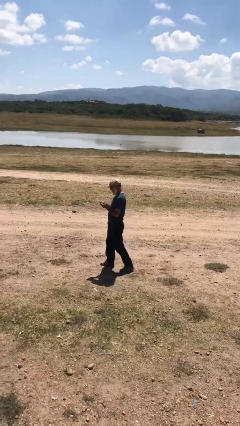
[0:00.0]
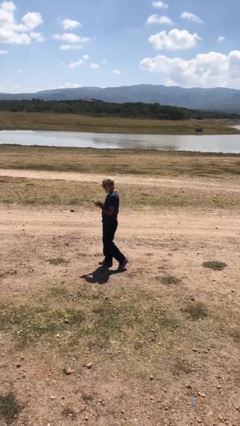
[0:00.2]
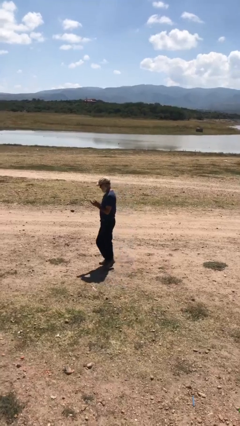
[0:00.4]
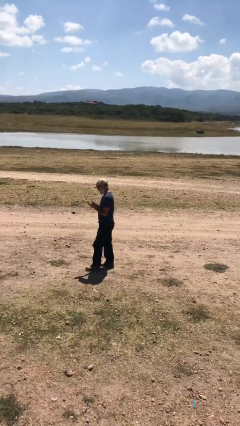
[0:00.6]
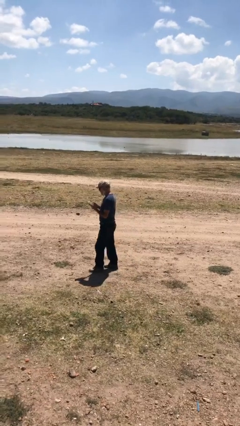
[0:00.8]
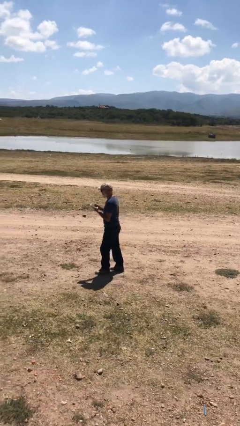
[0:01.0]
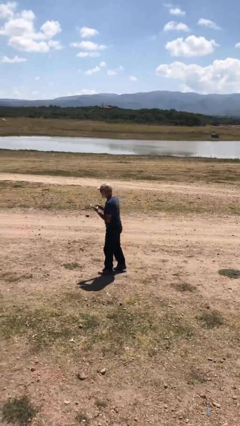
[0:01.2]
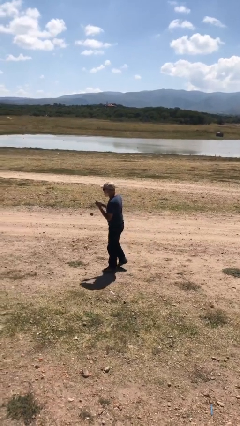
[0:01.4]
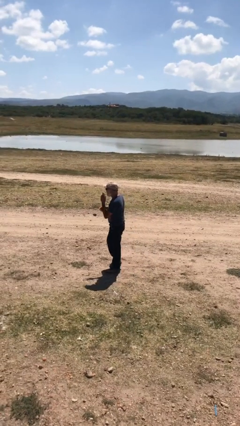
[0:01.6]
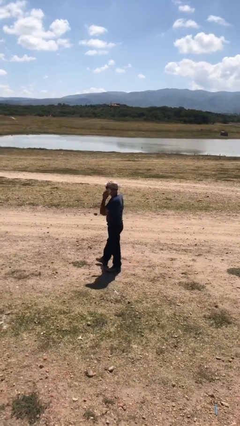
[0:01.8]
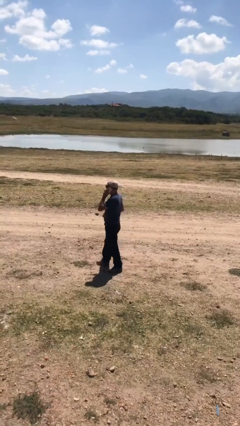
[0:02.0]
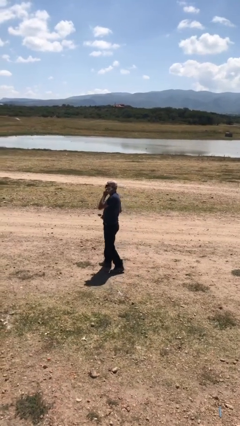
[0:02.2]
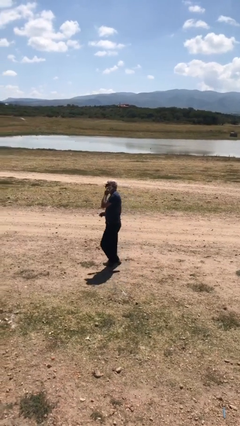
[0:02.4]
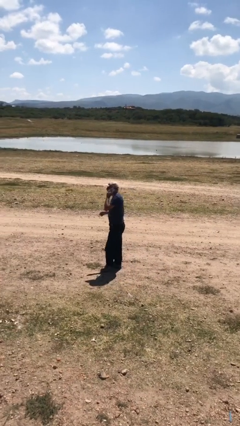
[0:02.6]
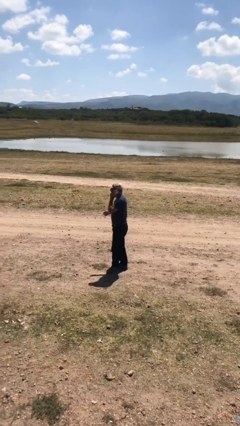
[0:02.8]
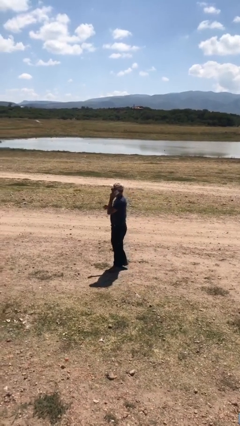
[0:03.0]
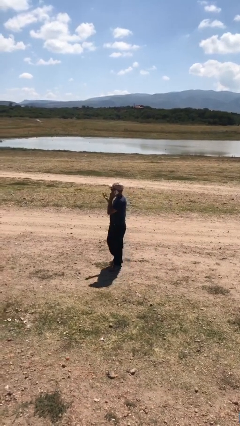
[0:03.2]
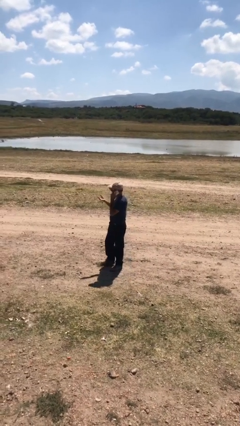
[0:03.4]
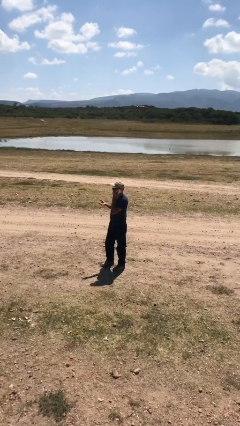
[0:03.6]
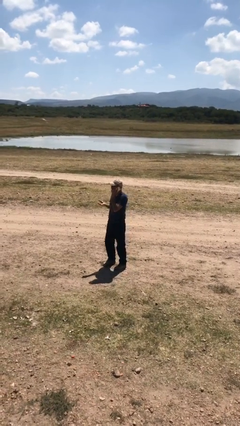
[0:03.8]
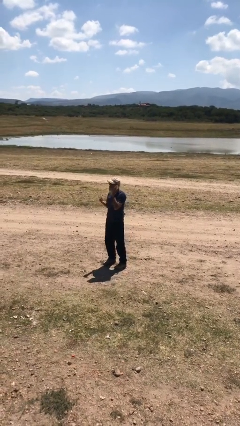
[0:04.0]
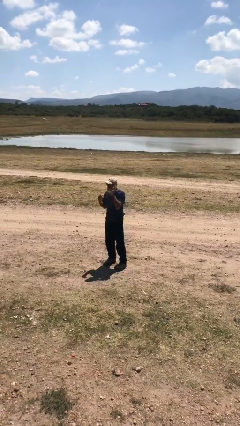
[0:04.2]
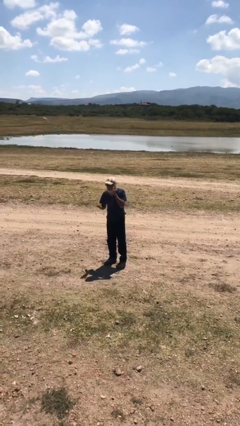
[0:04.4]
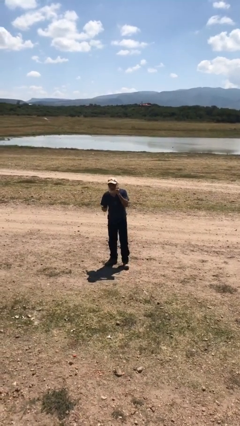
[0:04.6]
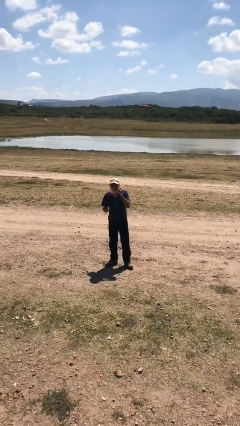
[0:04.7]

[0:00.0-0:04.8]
person talks on phone

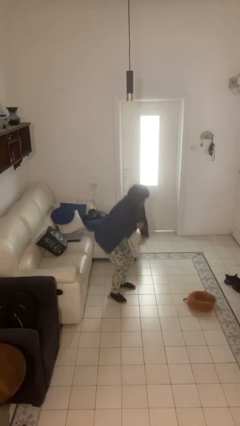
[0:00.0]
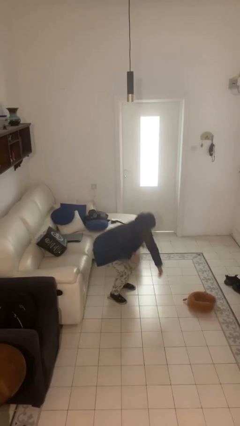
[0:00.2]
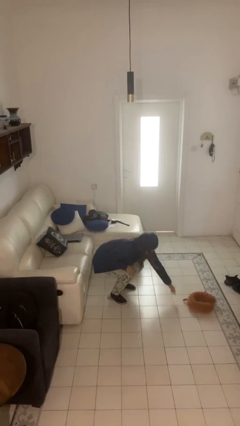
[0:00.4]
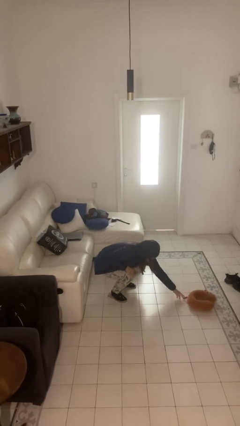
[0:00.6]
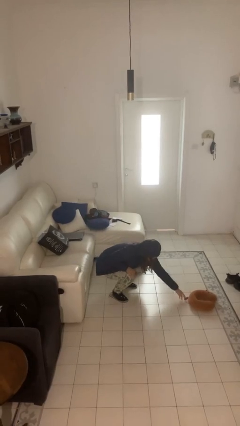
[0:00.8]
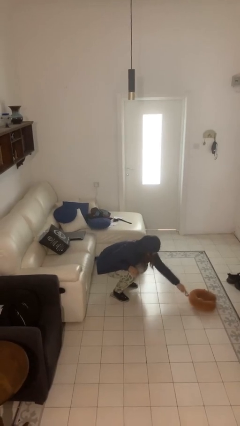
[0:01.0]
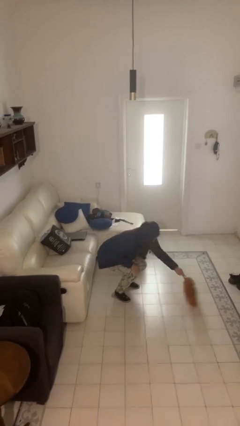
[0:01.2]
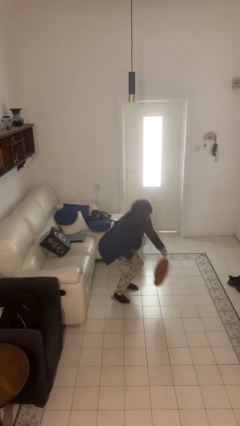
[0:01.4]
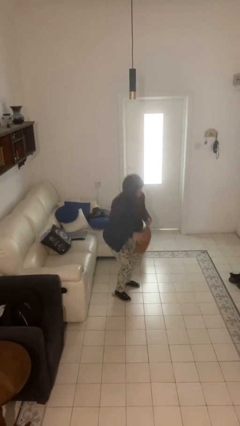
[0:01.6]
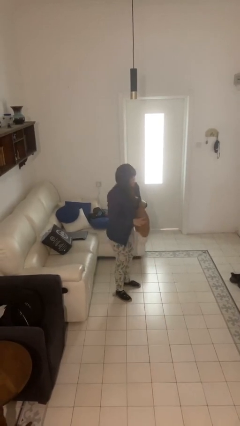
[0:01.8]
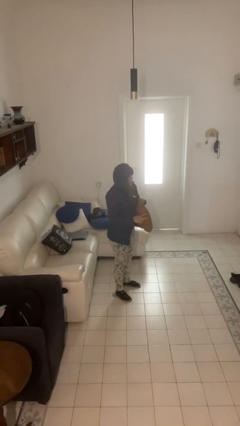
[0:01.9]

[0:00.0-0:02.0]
person picks up object from floor

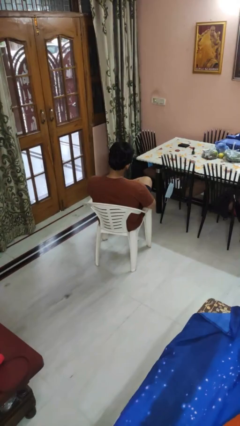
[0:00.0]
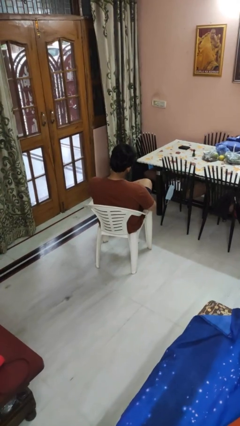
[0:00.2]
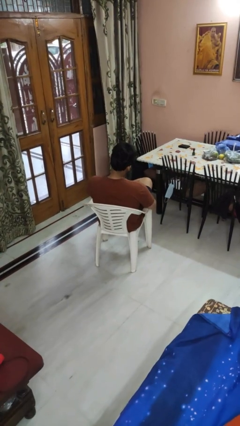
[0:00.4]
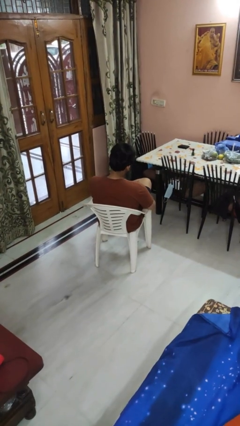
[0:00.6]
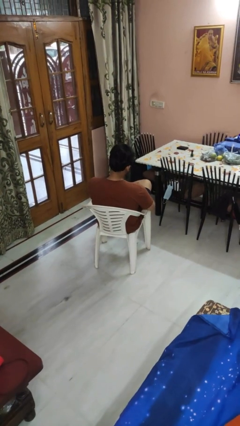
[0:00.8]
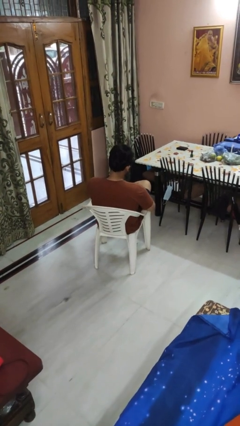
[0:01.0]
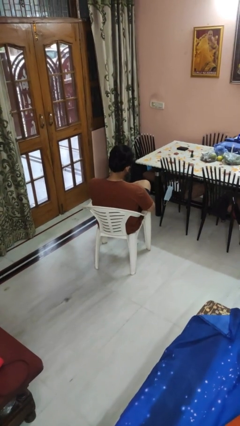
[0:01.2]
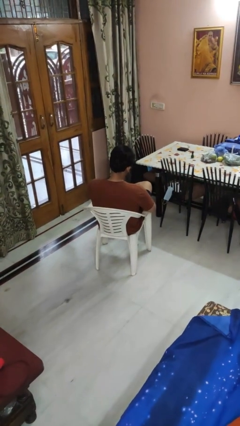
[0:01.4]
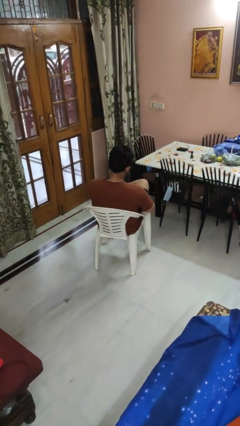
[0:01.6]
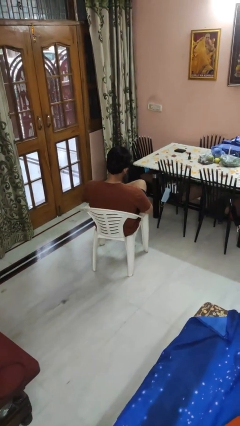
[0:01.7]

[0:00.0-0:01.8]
person rubs foot

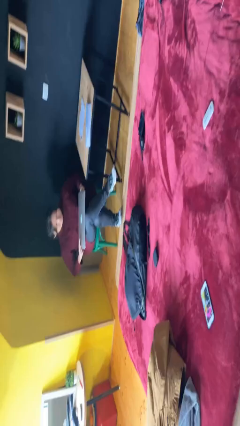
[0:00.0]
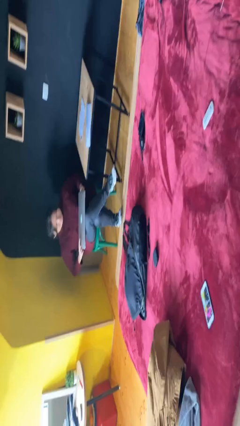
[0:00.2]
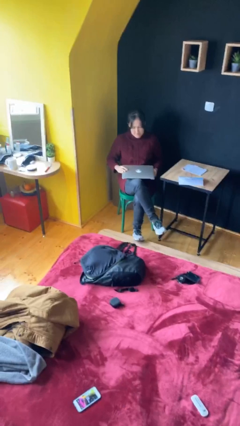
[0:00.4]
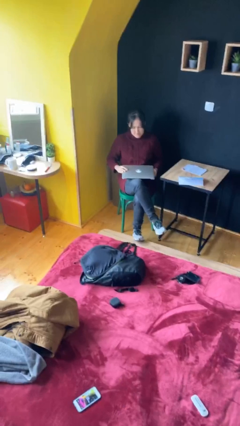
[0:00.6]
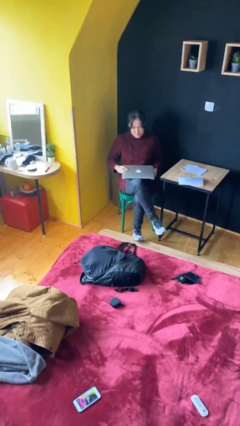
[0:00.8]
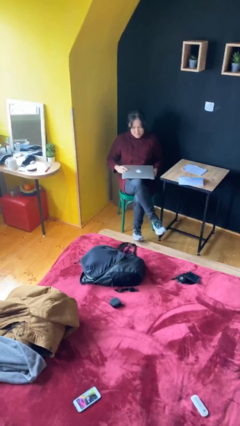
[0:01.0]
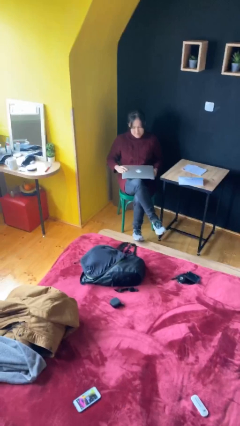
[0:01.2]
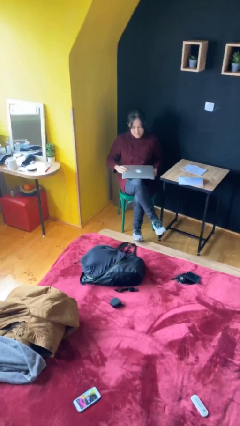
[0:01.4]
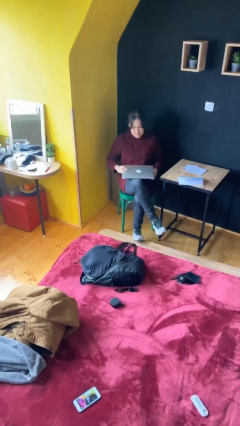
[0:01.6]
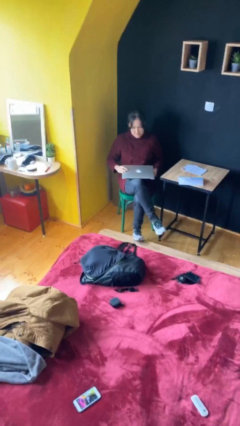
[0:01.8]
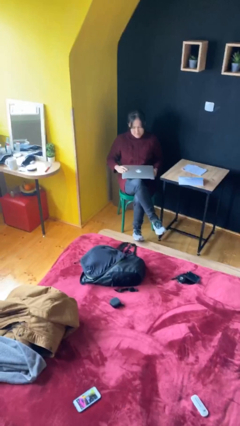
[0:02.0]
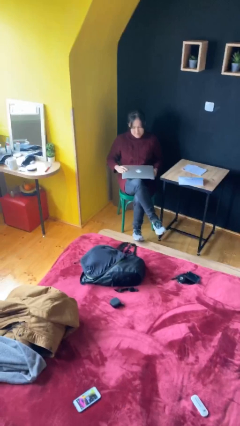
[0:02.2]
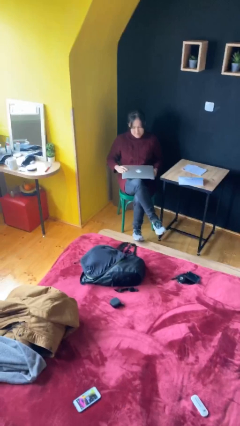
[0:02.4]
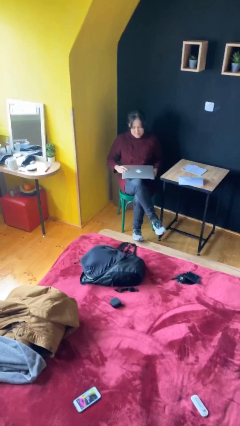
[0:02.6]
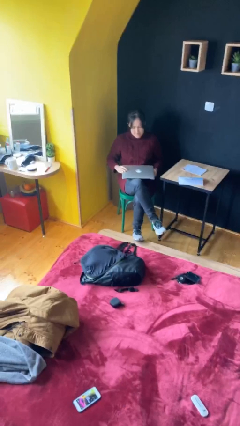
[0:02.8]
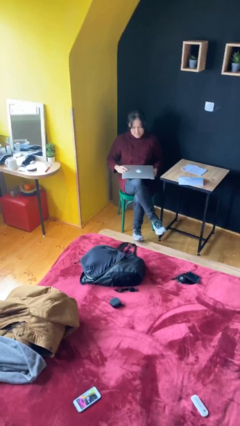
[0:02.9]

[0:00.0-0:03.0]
person interacts with laptop

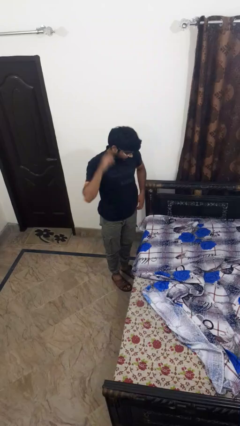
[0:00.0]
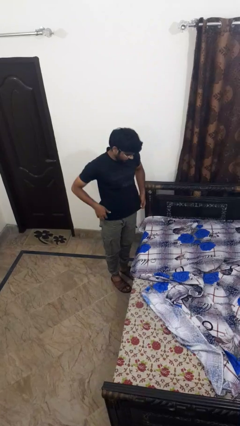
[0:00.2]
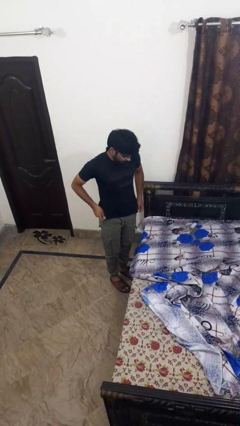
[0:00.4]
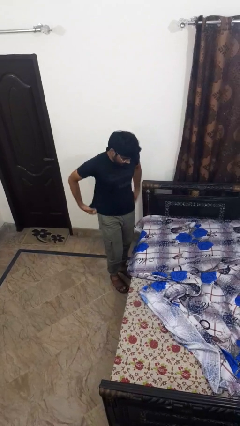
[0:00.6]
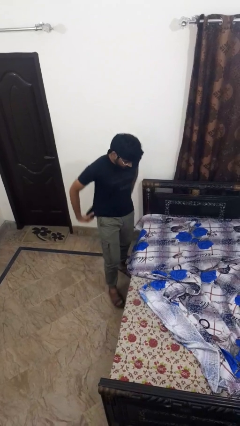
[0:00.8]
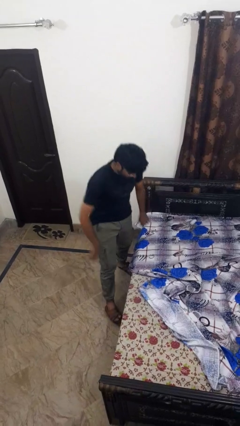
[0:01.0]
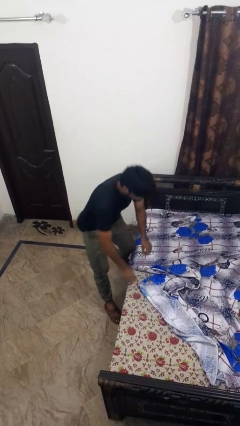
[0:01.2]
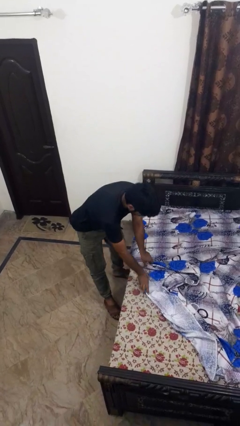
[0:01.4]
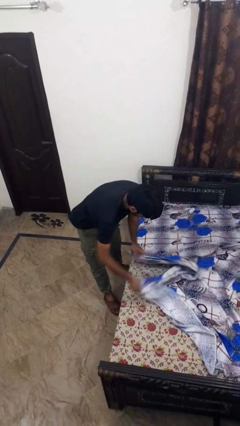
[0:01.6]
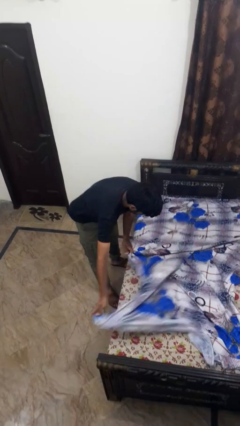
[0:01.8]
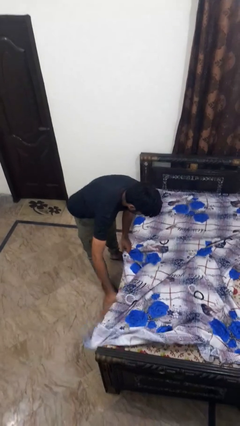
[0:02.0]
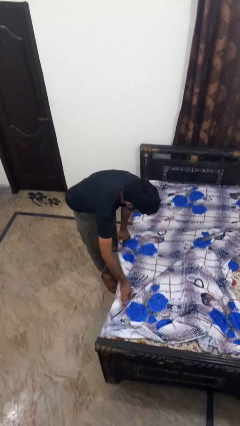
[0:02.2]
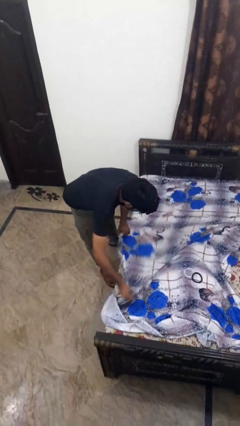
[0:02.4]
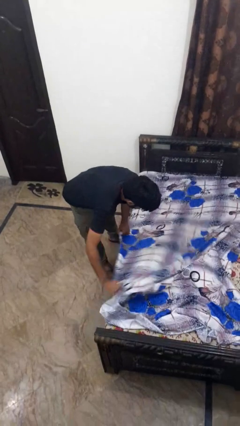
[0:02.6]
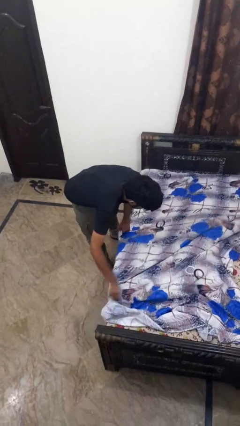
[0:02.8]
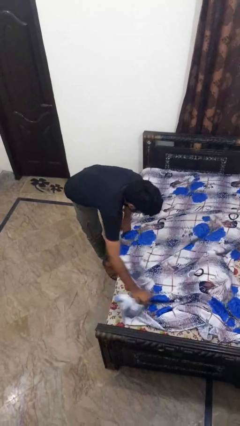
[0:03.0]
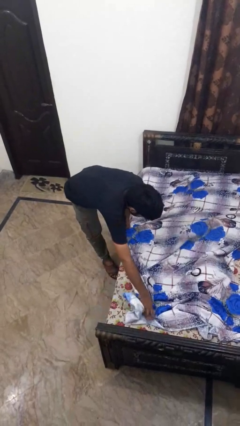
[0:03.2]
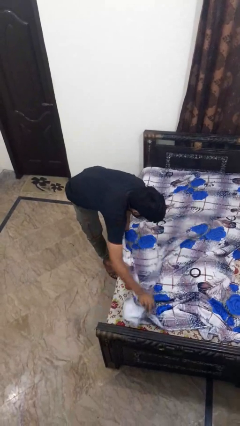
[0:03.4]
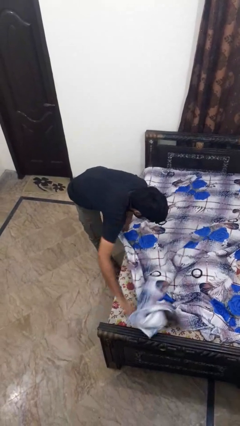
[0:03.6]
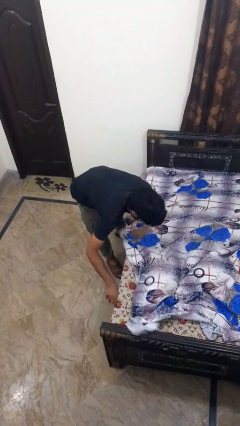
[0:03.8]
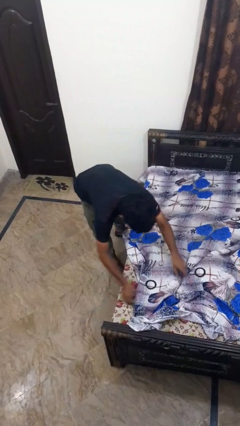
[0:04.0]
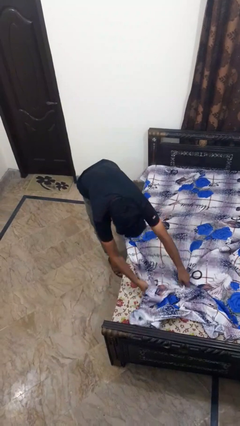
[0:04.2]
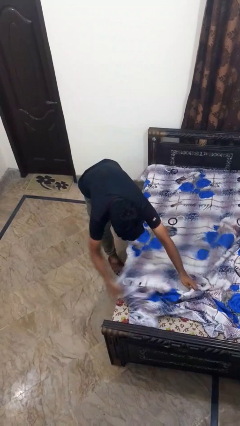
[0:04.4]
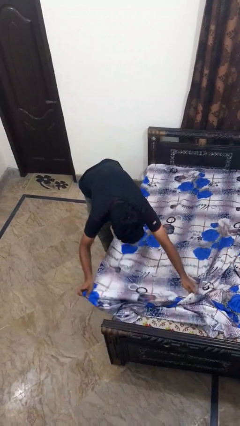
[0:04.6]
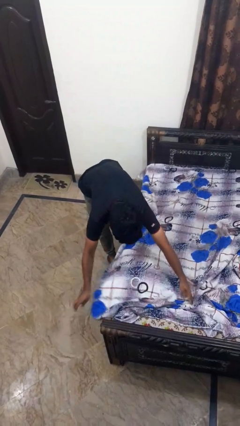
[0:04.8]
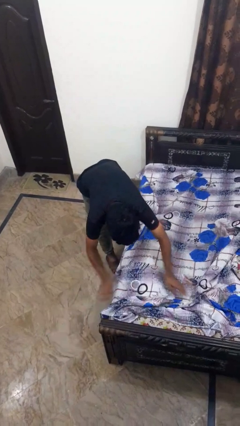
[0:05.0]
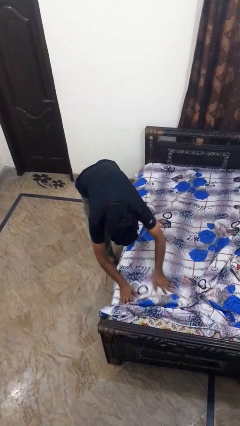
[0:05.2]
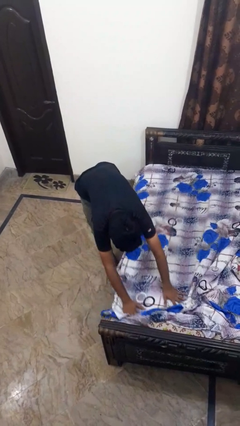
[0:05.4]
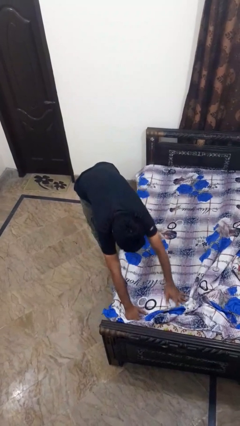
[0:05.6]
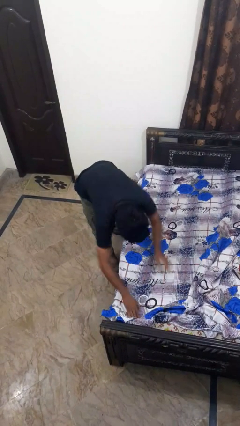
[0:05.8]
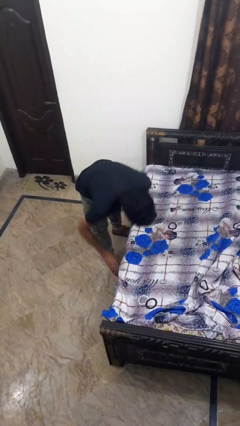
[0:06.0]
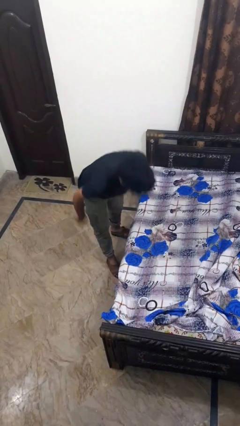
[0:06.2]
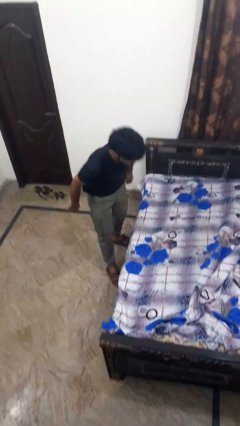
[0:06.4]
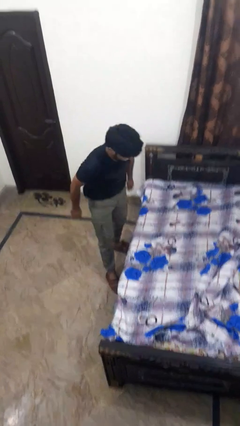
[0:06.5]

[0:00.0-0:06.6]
person makes bed
